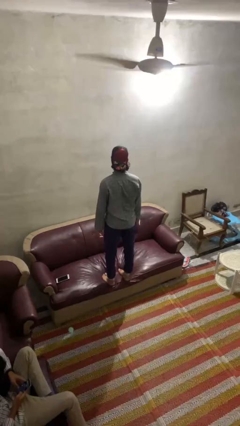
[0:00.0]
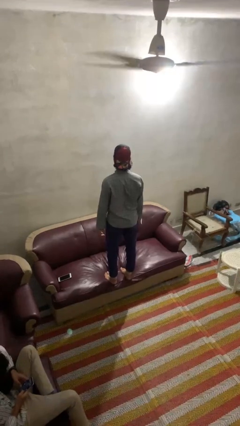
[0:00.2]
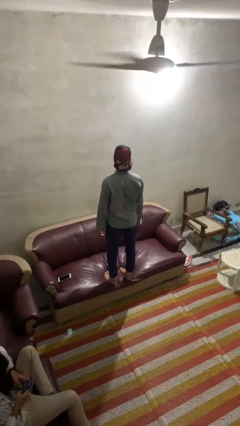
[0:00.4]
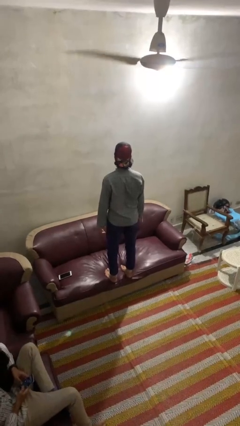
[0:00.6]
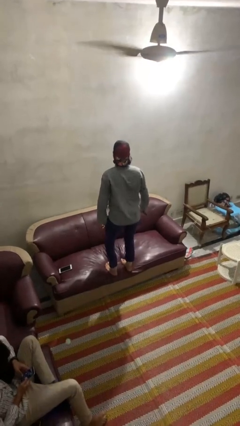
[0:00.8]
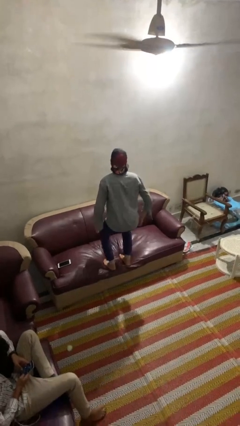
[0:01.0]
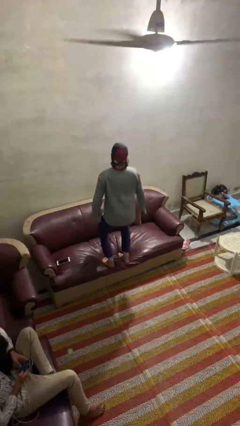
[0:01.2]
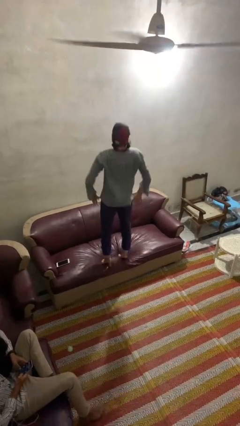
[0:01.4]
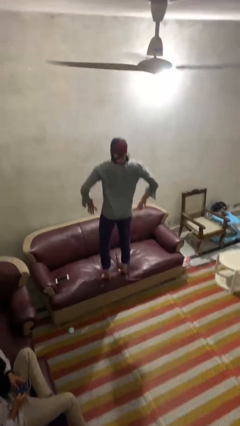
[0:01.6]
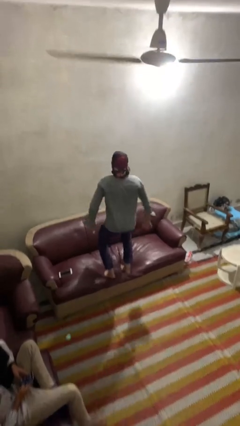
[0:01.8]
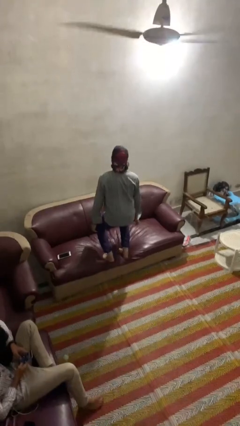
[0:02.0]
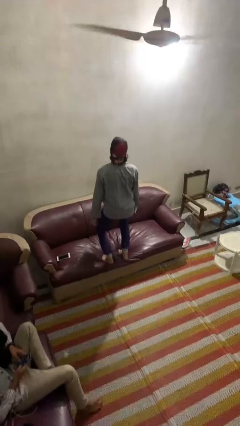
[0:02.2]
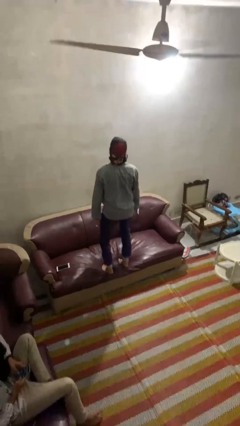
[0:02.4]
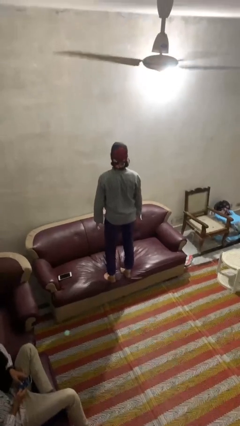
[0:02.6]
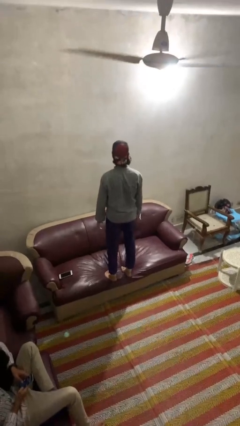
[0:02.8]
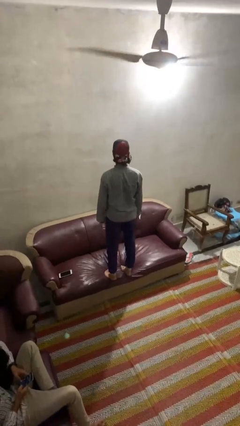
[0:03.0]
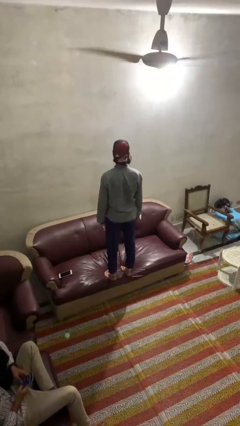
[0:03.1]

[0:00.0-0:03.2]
person jumps on couch

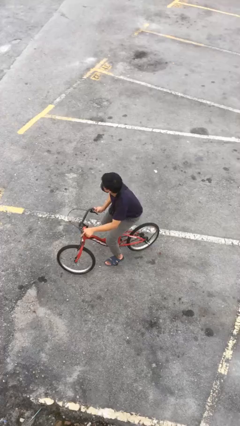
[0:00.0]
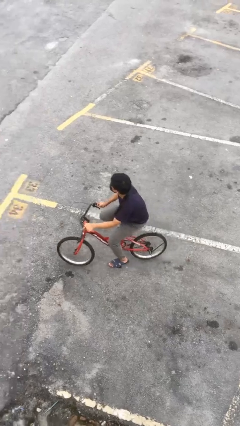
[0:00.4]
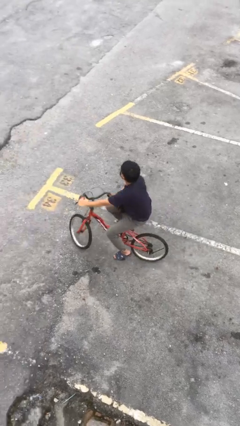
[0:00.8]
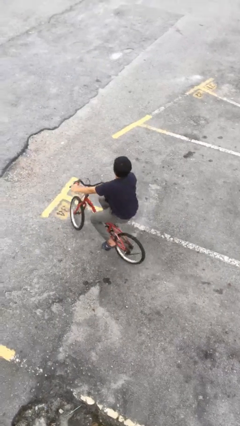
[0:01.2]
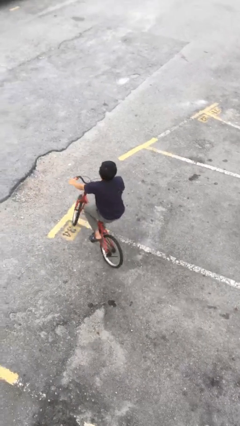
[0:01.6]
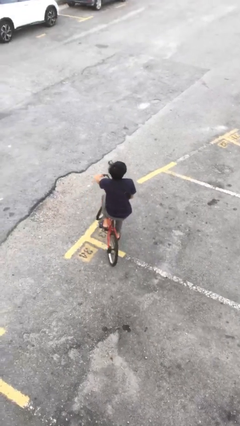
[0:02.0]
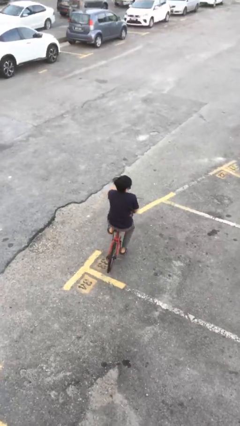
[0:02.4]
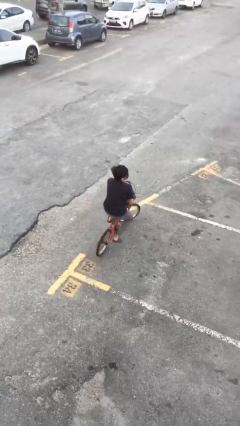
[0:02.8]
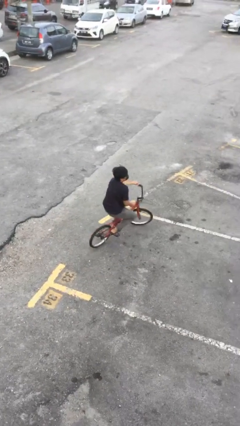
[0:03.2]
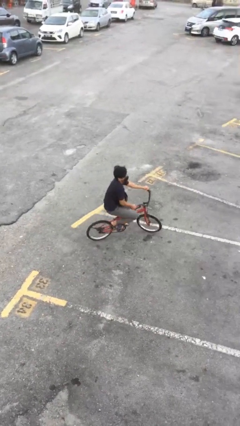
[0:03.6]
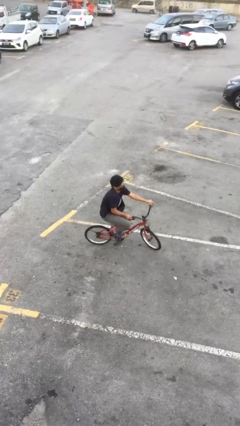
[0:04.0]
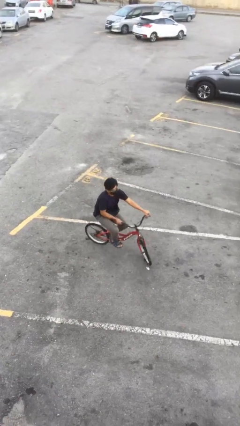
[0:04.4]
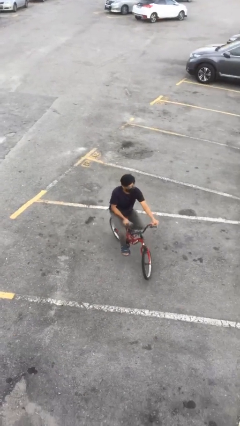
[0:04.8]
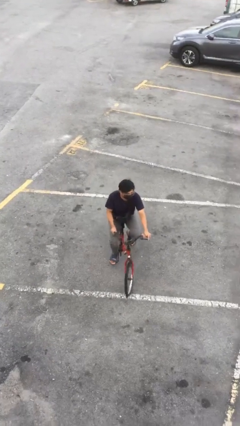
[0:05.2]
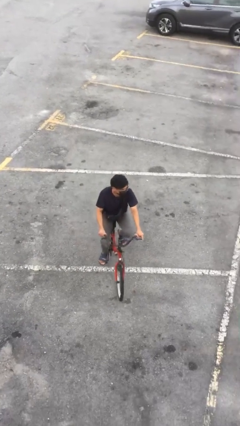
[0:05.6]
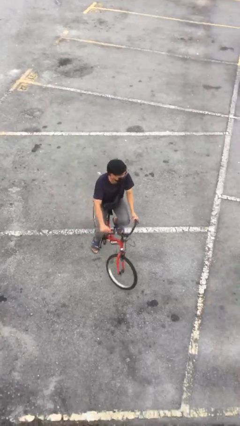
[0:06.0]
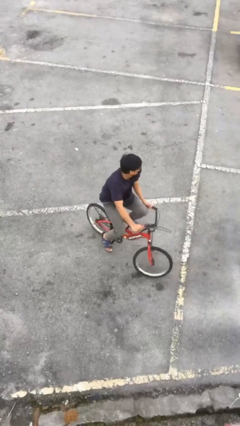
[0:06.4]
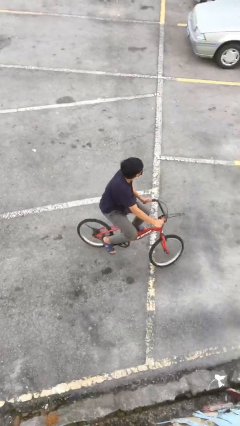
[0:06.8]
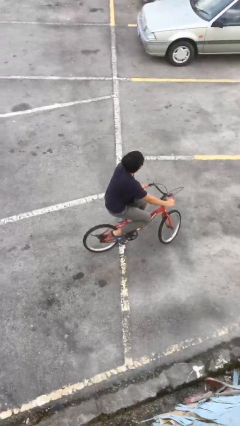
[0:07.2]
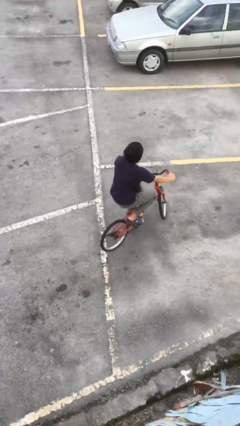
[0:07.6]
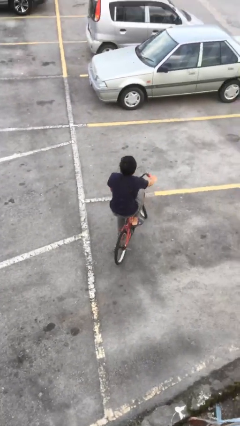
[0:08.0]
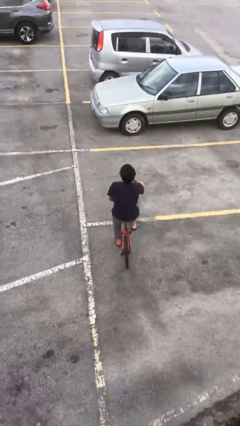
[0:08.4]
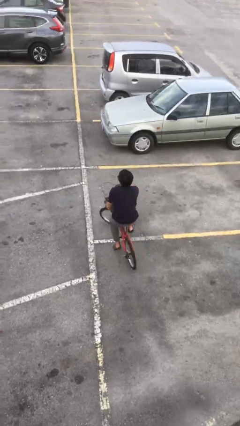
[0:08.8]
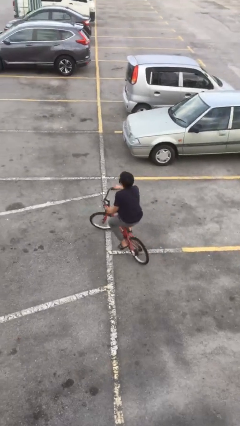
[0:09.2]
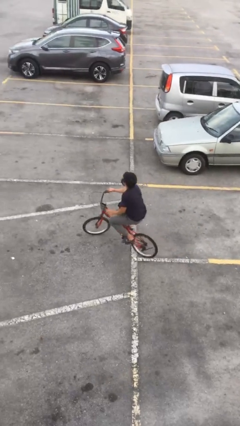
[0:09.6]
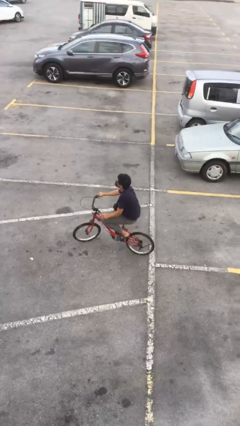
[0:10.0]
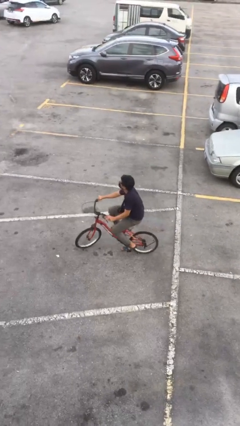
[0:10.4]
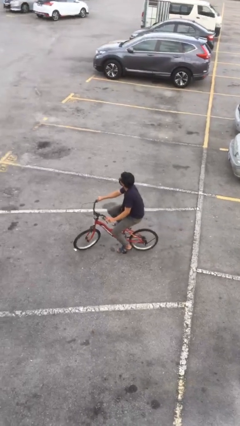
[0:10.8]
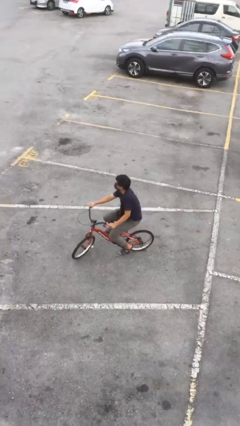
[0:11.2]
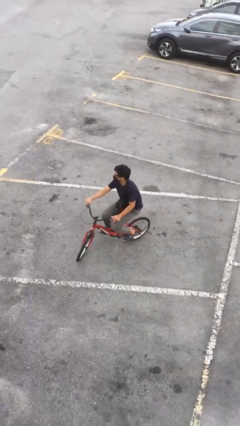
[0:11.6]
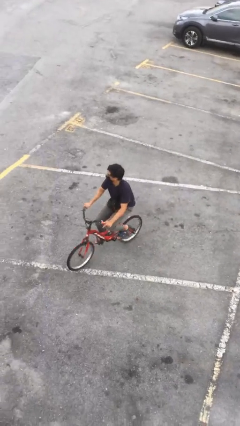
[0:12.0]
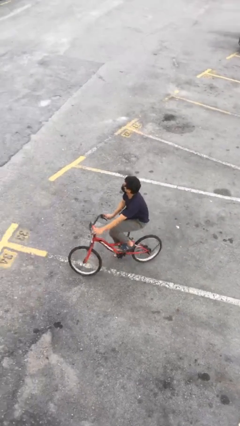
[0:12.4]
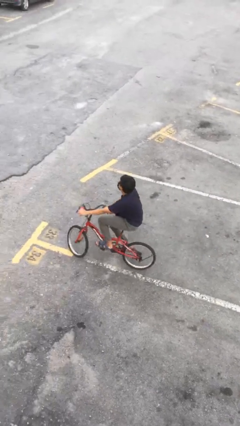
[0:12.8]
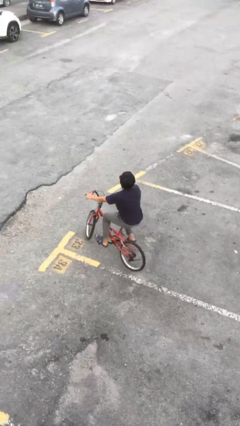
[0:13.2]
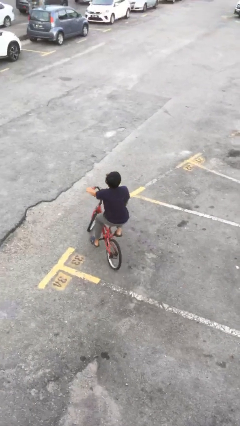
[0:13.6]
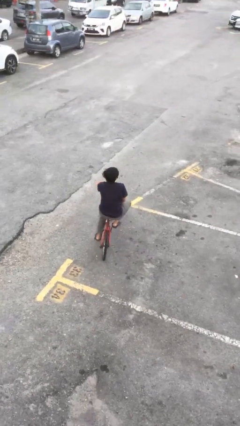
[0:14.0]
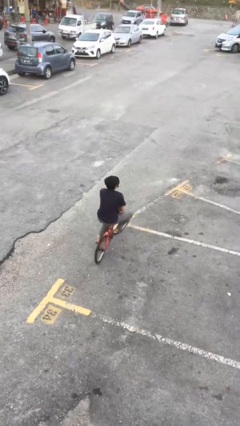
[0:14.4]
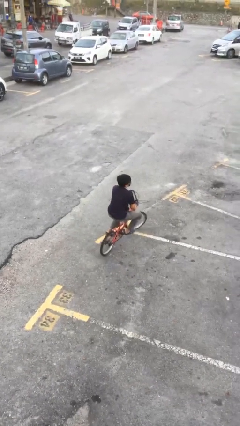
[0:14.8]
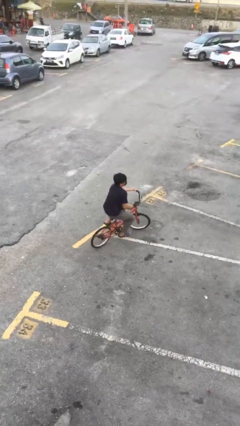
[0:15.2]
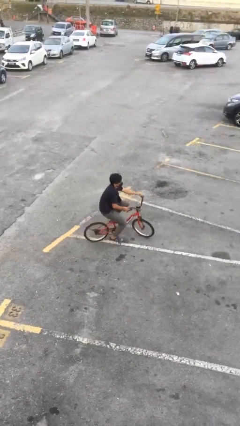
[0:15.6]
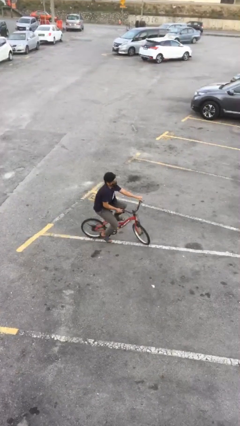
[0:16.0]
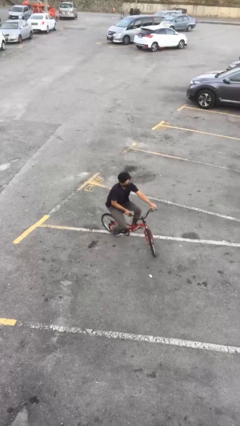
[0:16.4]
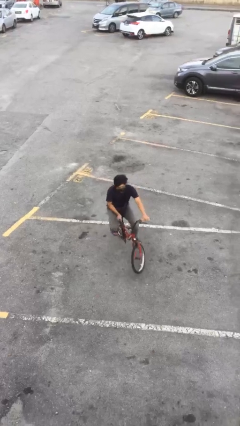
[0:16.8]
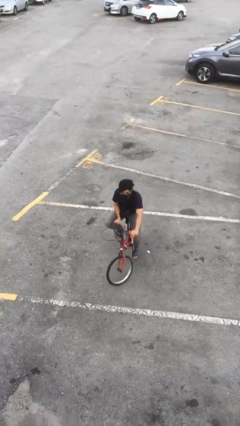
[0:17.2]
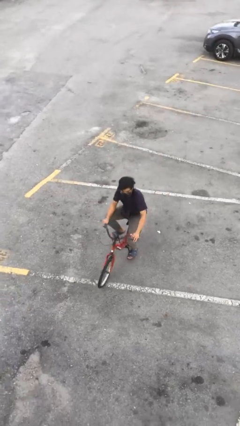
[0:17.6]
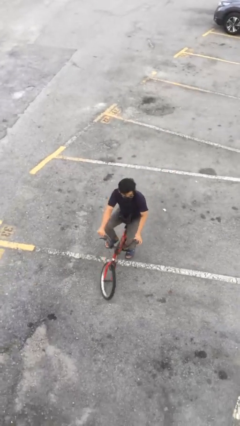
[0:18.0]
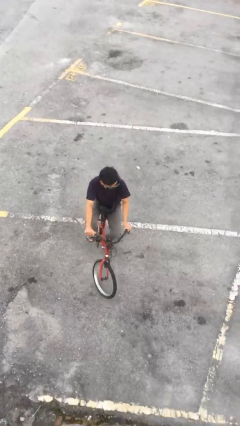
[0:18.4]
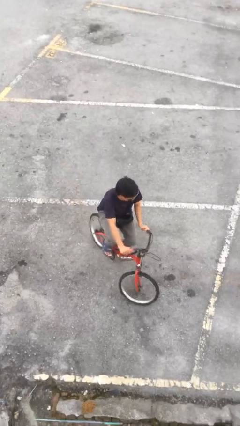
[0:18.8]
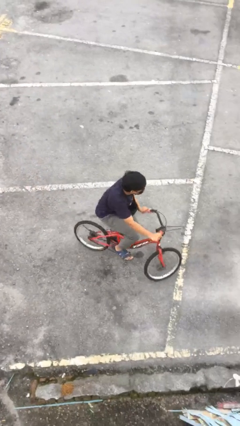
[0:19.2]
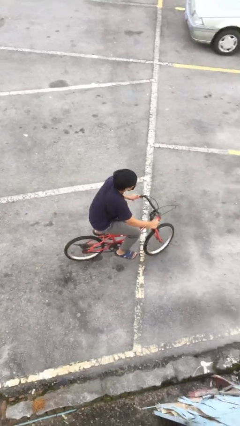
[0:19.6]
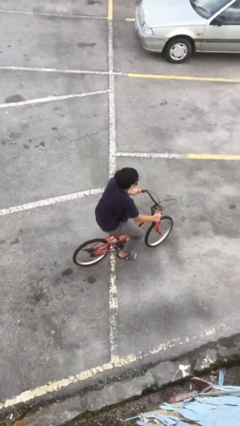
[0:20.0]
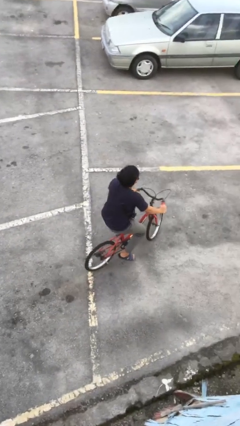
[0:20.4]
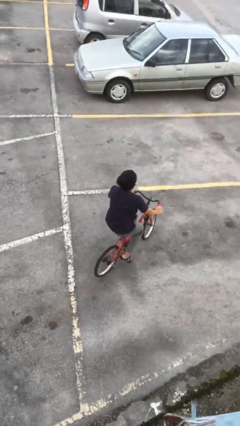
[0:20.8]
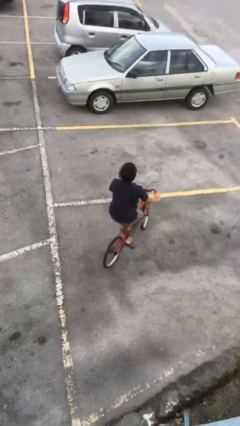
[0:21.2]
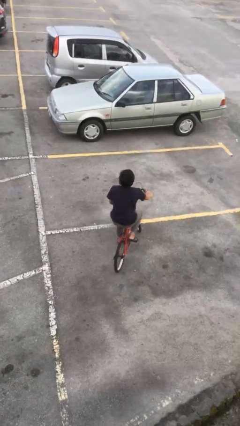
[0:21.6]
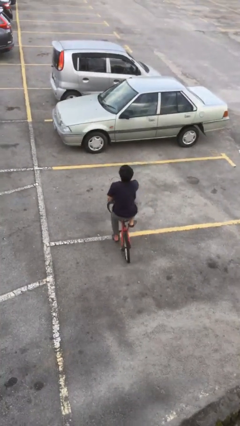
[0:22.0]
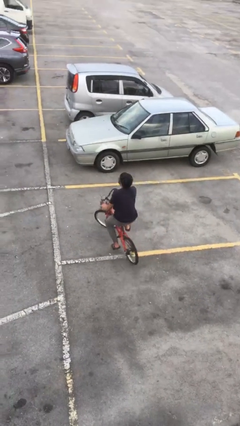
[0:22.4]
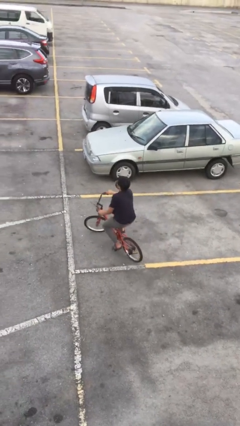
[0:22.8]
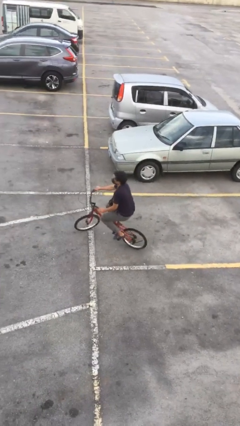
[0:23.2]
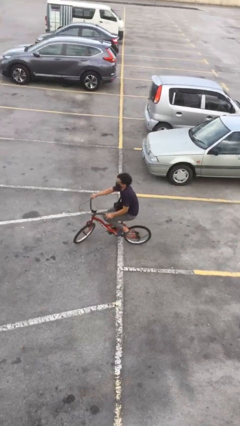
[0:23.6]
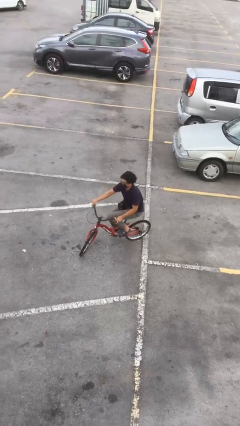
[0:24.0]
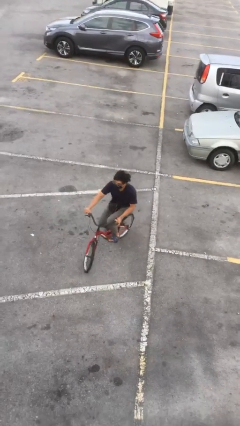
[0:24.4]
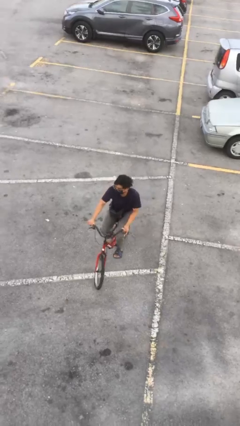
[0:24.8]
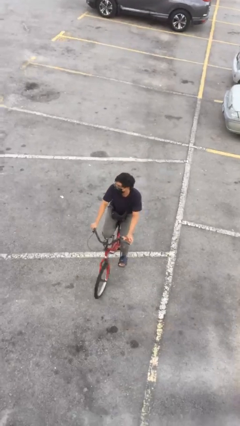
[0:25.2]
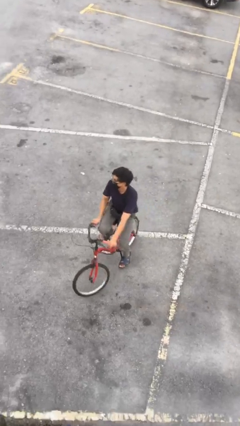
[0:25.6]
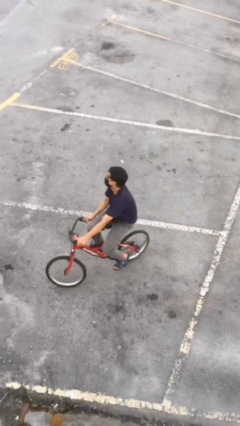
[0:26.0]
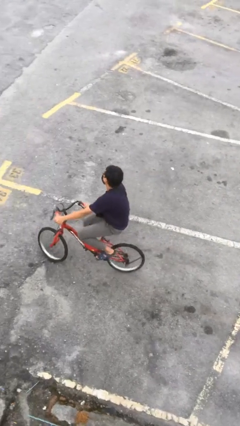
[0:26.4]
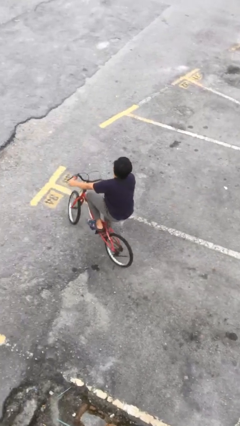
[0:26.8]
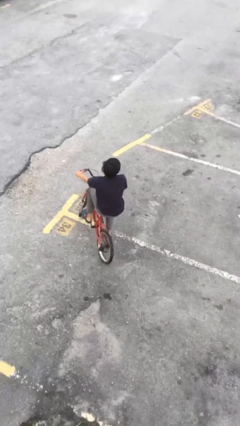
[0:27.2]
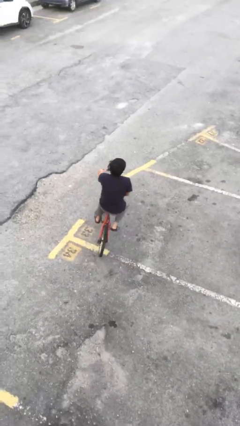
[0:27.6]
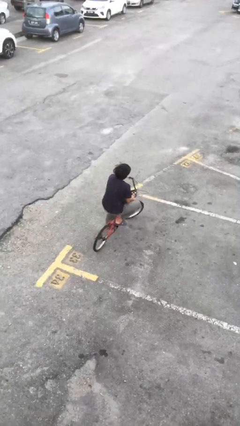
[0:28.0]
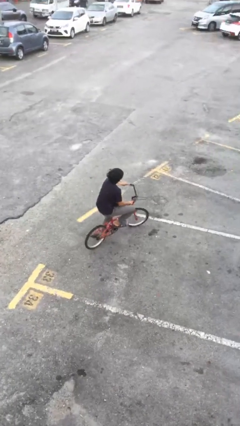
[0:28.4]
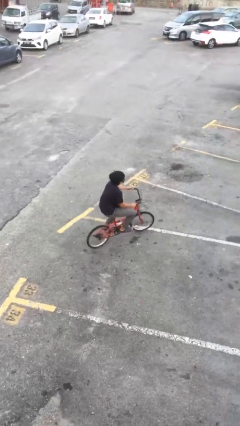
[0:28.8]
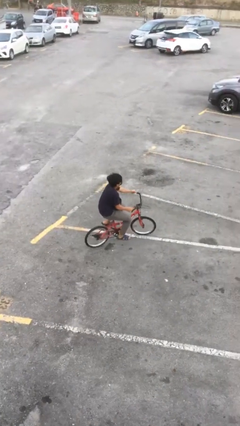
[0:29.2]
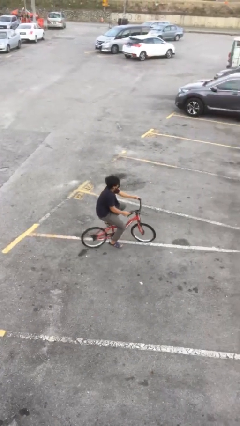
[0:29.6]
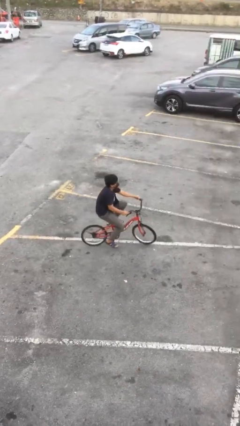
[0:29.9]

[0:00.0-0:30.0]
person rides bicycle
